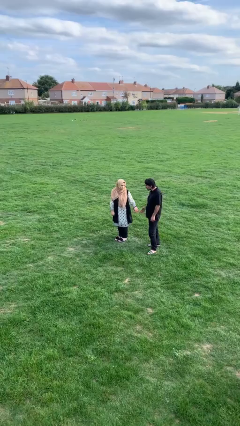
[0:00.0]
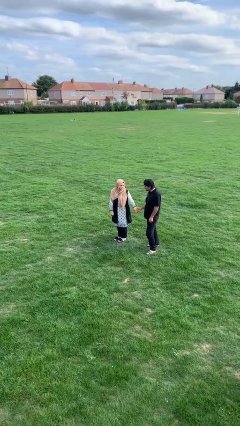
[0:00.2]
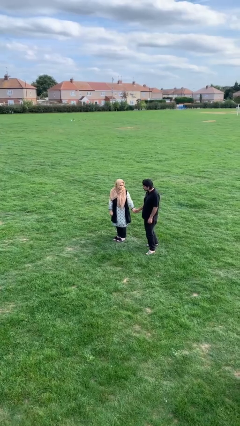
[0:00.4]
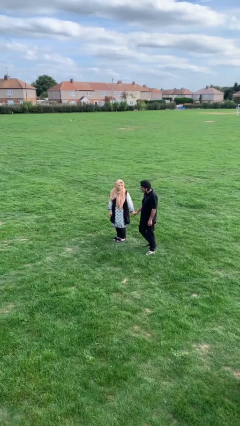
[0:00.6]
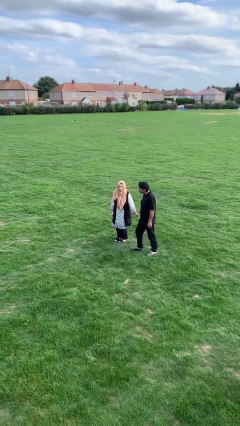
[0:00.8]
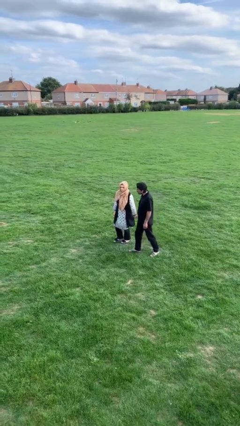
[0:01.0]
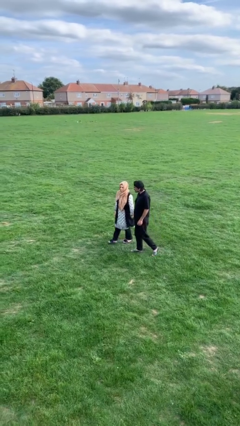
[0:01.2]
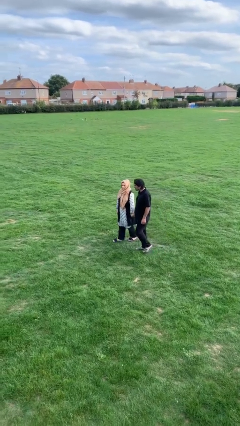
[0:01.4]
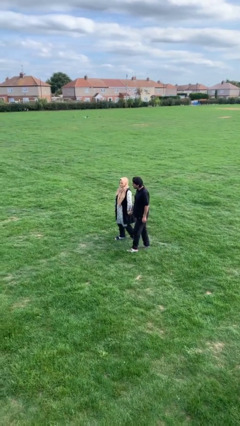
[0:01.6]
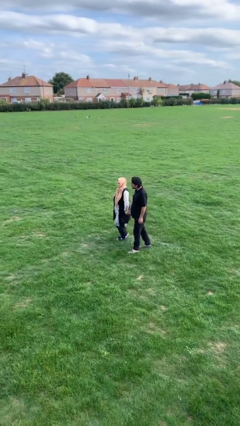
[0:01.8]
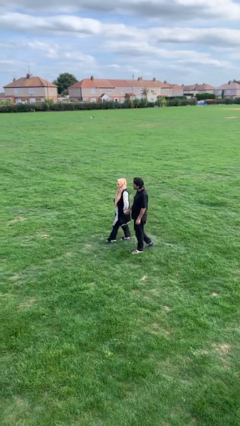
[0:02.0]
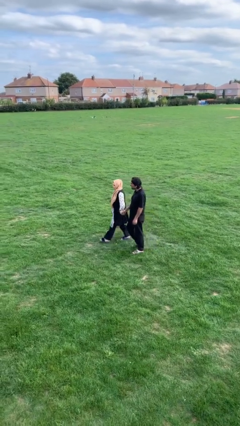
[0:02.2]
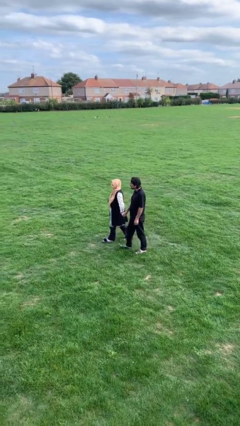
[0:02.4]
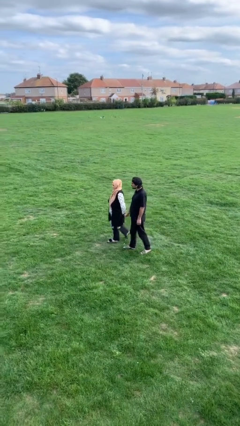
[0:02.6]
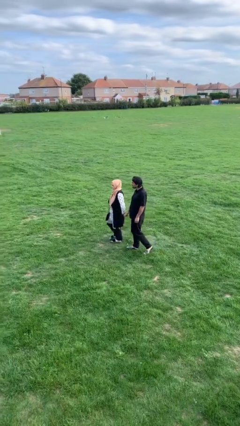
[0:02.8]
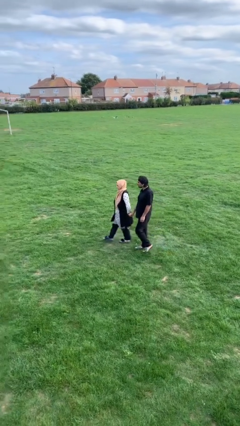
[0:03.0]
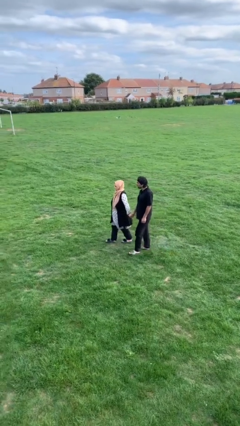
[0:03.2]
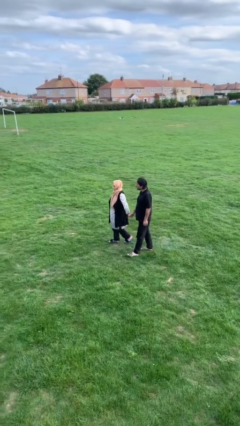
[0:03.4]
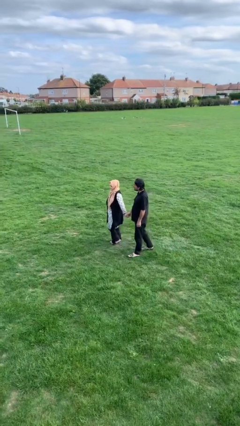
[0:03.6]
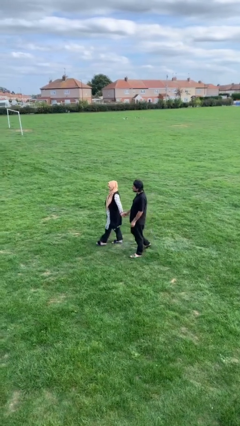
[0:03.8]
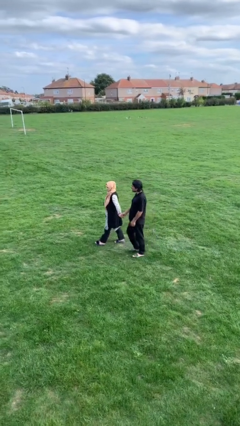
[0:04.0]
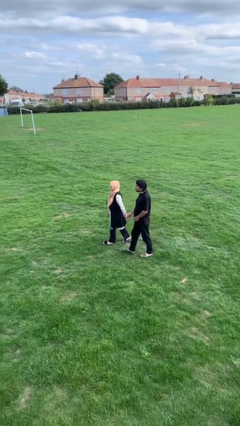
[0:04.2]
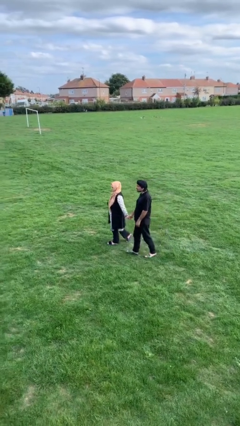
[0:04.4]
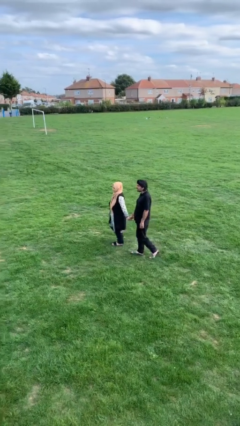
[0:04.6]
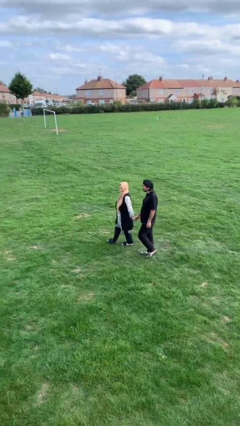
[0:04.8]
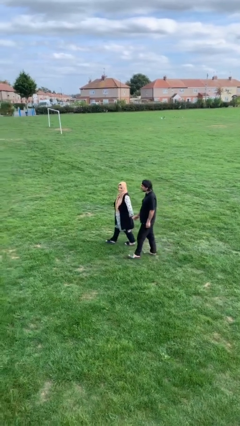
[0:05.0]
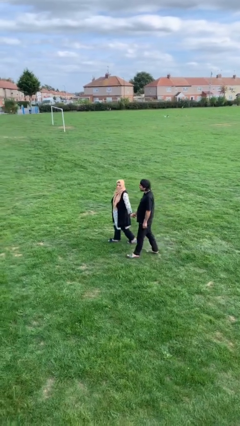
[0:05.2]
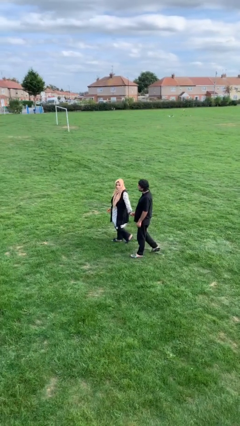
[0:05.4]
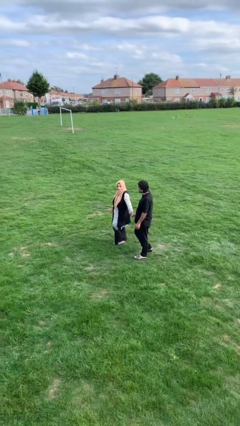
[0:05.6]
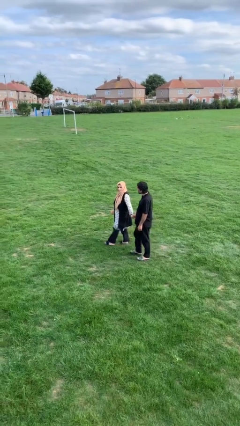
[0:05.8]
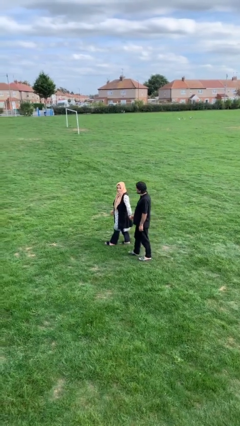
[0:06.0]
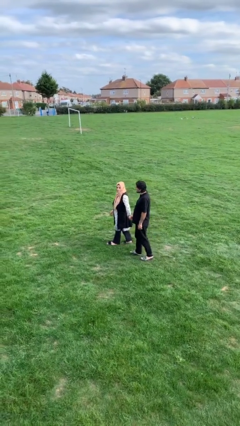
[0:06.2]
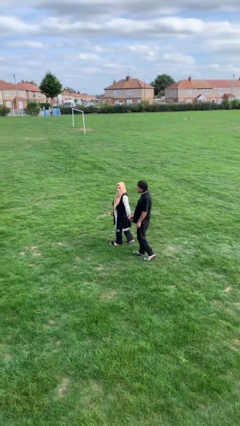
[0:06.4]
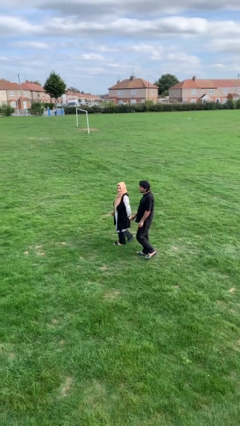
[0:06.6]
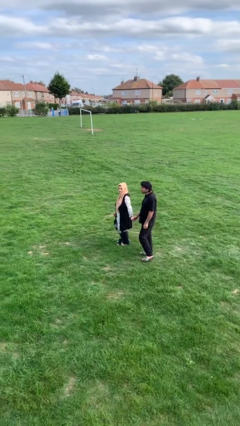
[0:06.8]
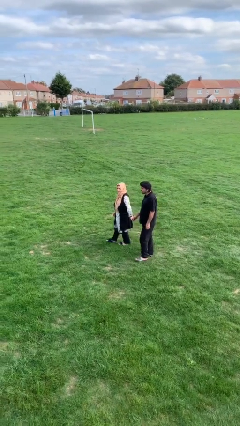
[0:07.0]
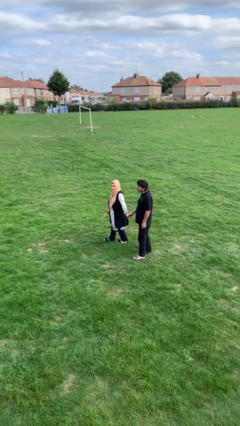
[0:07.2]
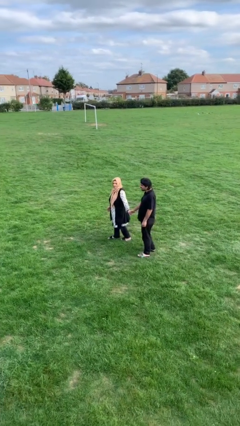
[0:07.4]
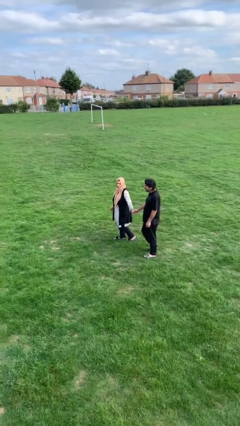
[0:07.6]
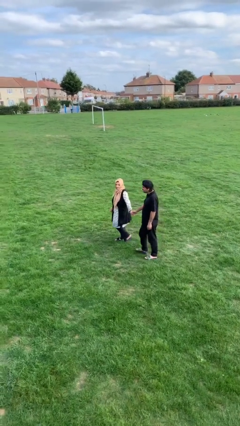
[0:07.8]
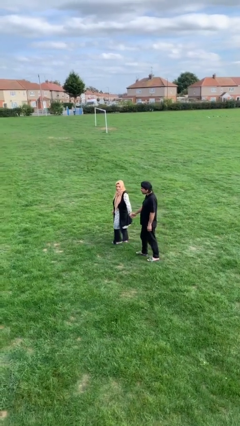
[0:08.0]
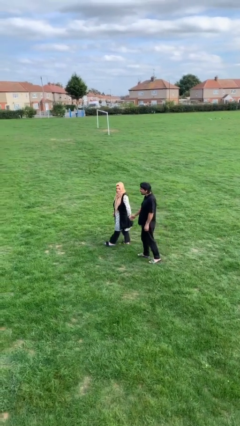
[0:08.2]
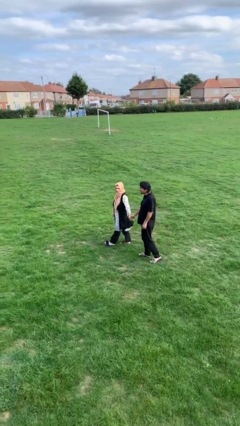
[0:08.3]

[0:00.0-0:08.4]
person holds hand

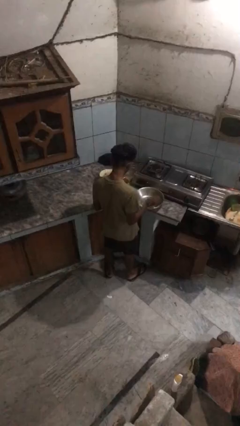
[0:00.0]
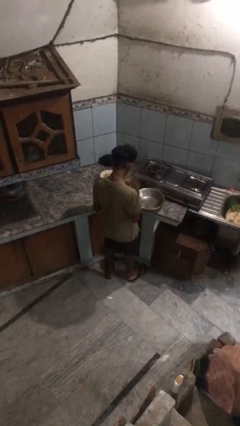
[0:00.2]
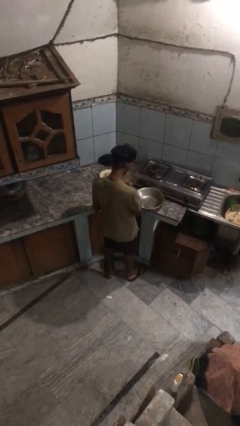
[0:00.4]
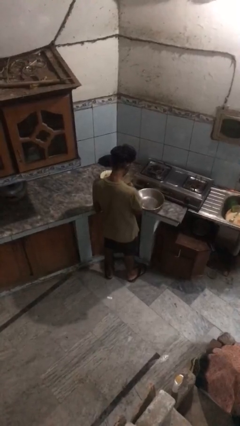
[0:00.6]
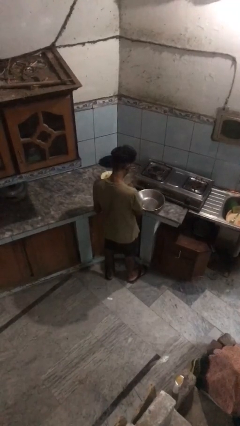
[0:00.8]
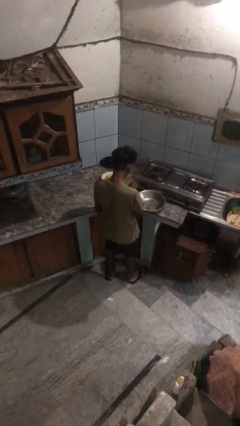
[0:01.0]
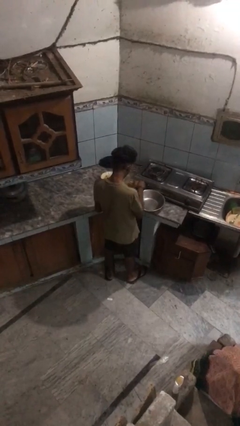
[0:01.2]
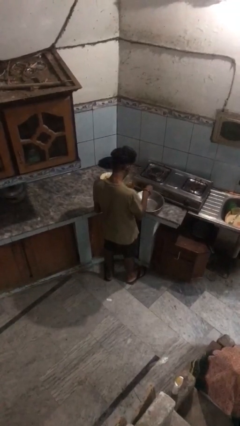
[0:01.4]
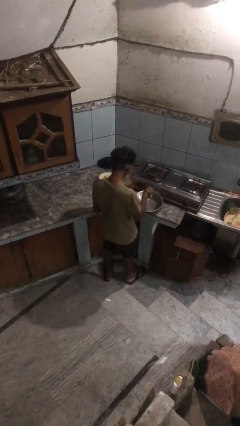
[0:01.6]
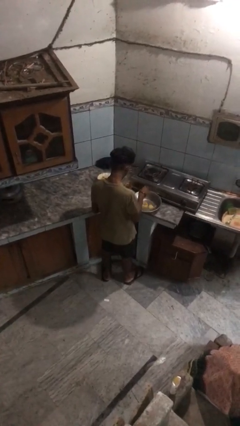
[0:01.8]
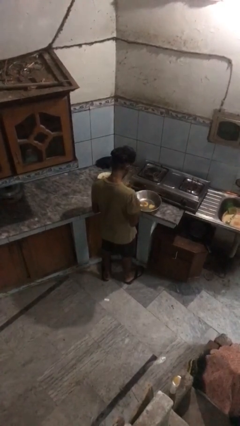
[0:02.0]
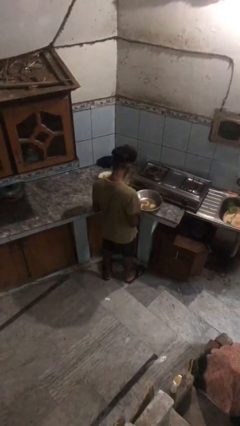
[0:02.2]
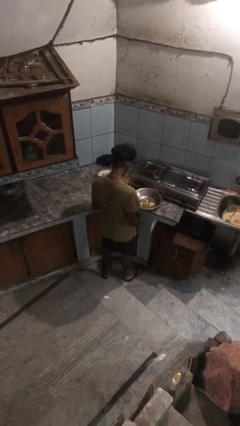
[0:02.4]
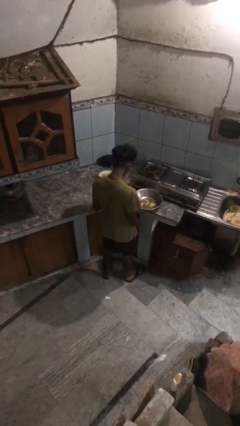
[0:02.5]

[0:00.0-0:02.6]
person pours into bowl

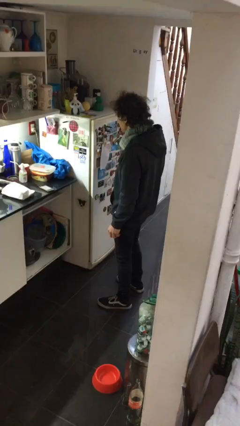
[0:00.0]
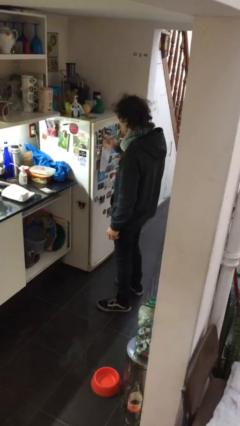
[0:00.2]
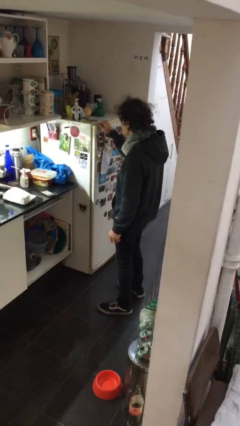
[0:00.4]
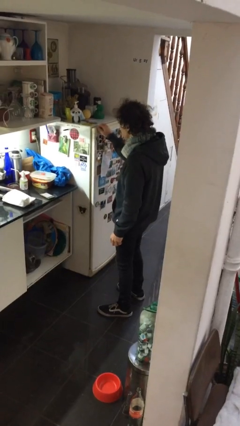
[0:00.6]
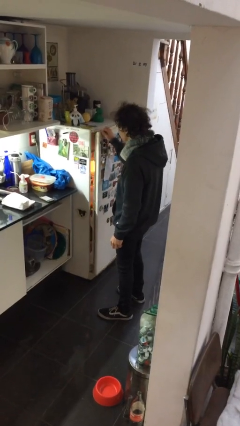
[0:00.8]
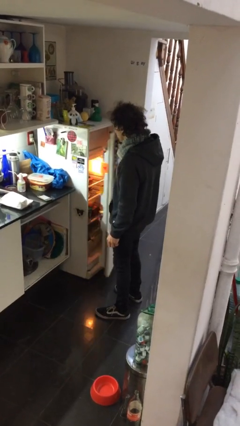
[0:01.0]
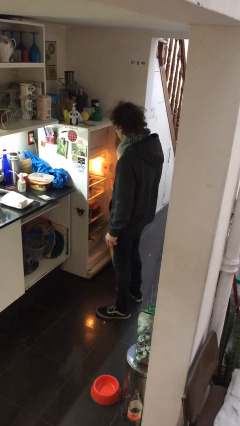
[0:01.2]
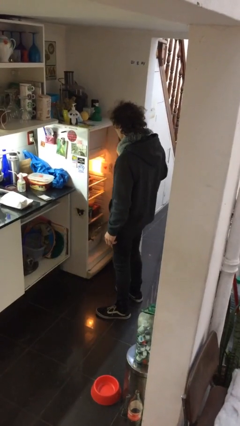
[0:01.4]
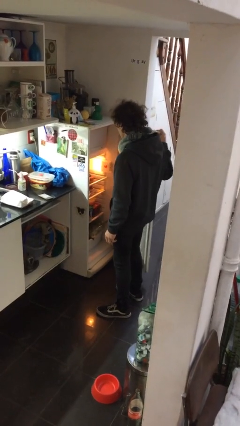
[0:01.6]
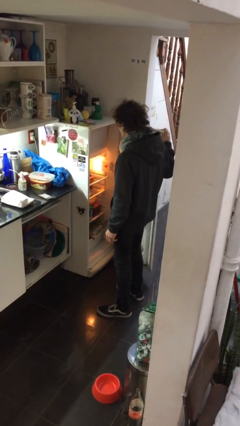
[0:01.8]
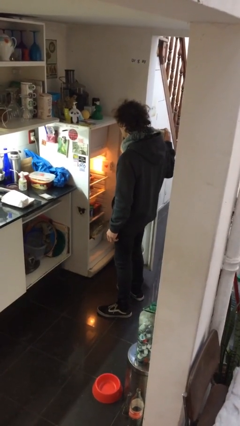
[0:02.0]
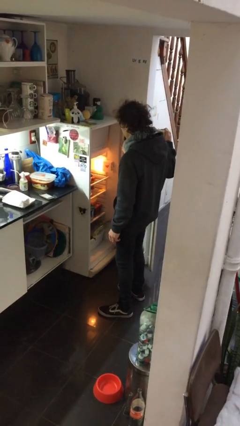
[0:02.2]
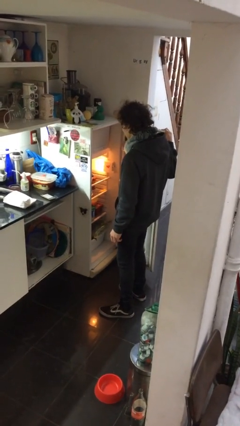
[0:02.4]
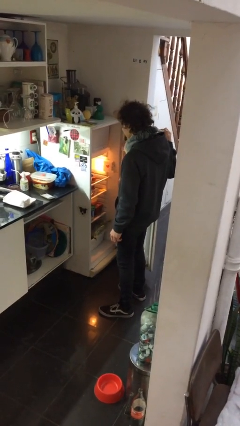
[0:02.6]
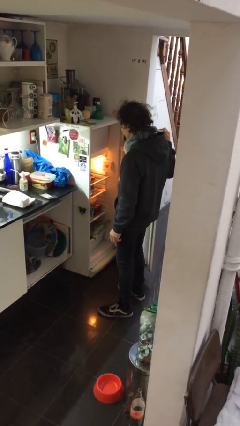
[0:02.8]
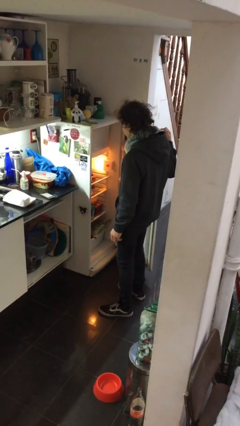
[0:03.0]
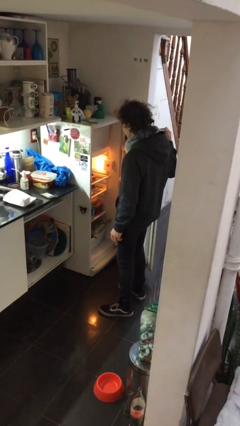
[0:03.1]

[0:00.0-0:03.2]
person opens refrigerator

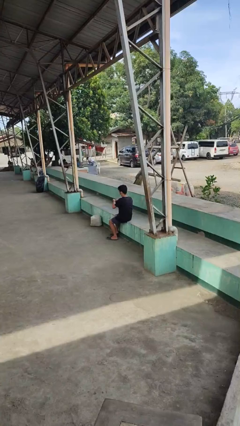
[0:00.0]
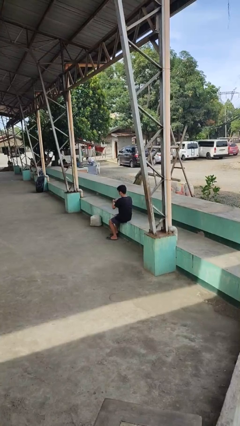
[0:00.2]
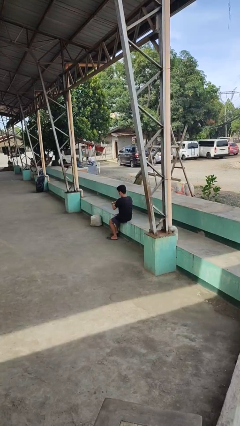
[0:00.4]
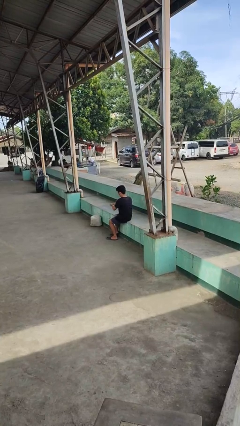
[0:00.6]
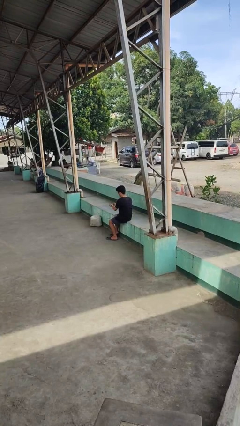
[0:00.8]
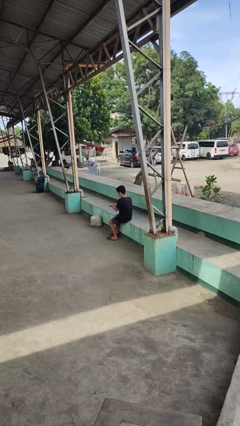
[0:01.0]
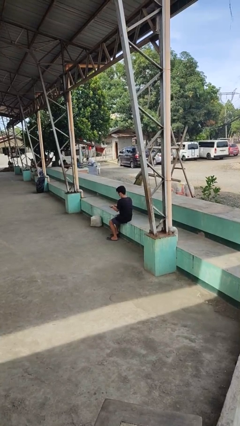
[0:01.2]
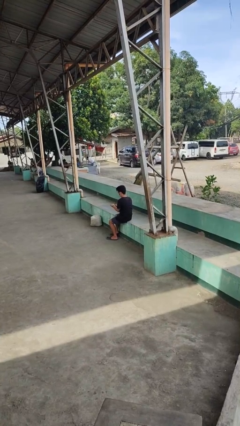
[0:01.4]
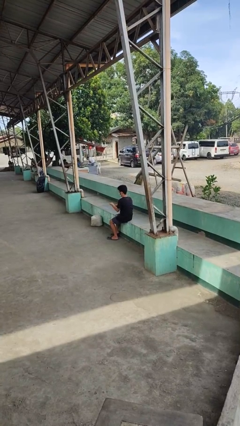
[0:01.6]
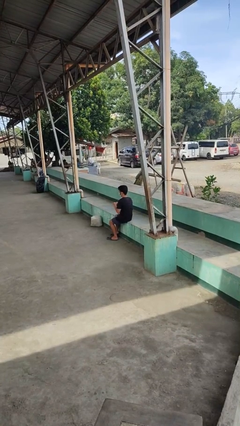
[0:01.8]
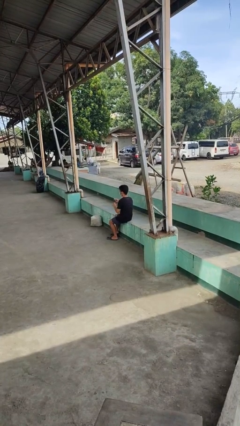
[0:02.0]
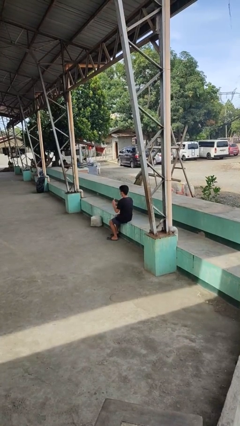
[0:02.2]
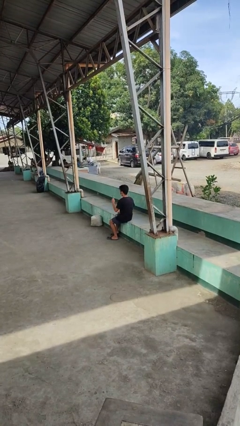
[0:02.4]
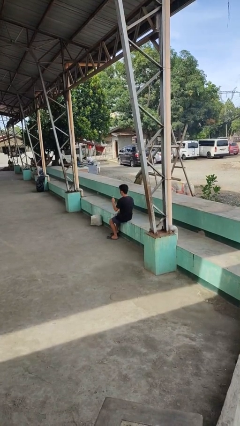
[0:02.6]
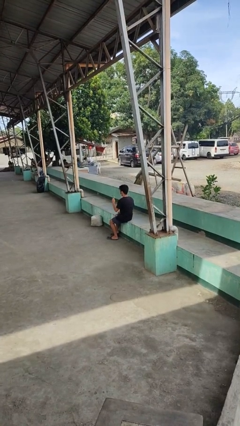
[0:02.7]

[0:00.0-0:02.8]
person takes off wristwatch

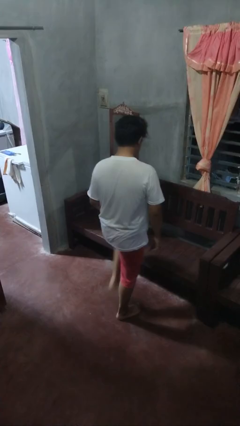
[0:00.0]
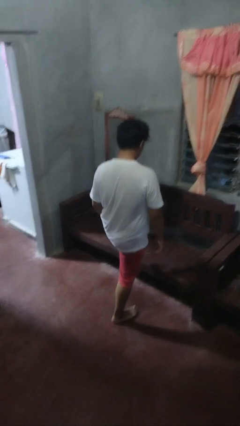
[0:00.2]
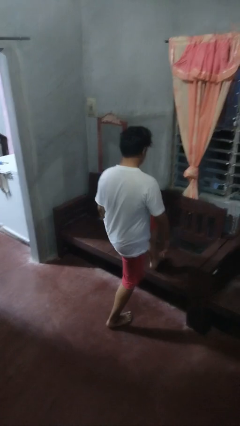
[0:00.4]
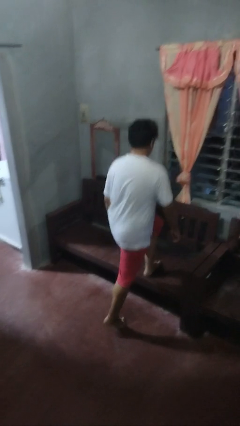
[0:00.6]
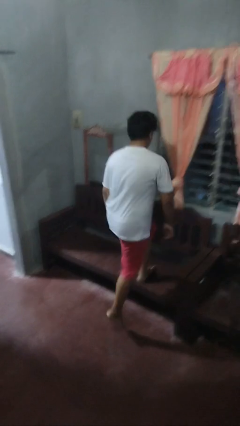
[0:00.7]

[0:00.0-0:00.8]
person climbs on couch

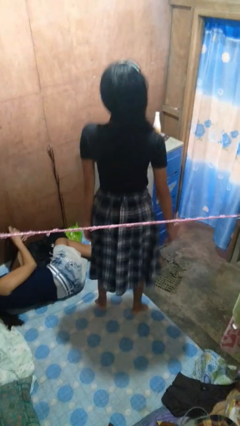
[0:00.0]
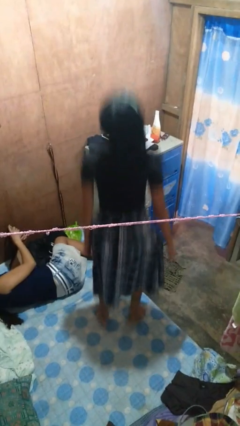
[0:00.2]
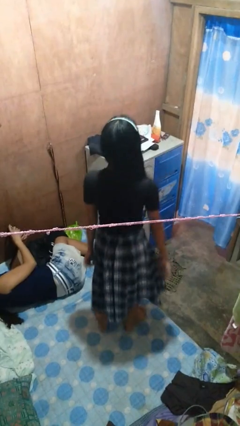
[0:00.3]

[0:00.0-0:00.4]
person jumps on bed
